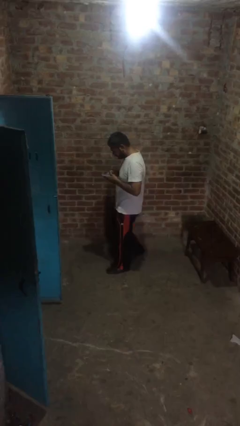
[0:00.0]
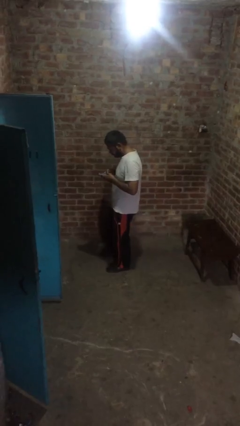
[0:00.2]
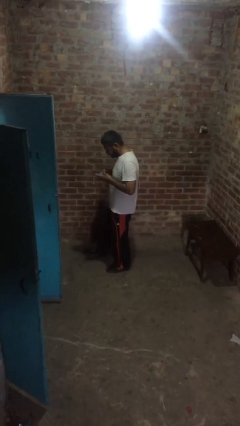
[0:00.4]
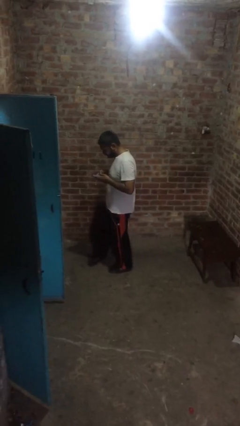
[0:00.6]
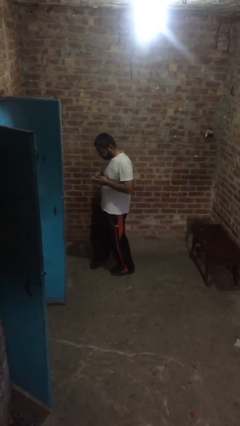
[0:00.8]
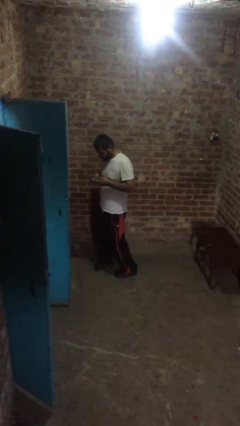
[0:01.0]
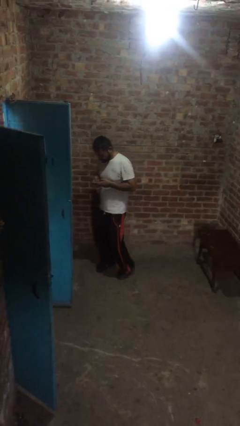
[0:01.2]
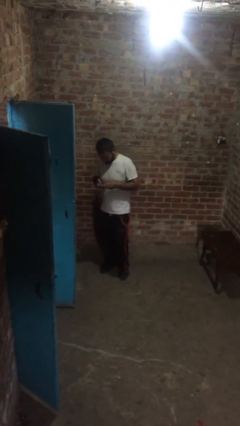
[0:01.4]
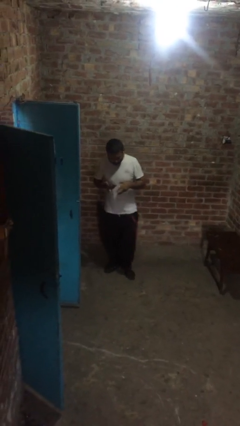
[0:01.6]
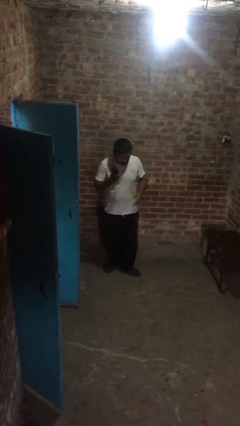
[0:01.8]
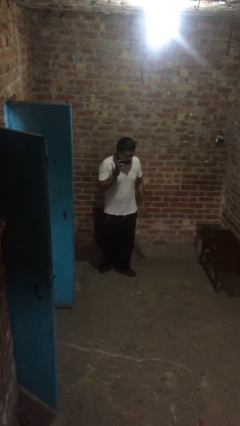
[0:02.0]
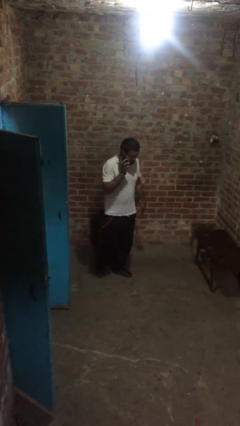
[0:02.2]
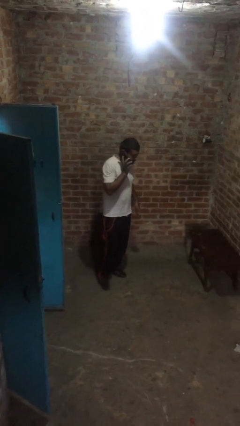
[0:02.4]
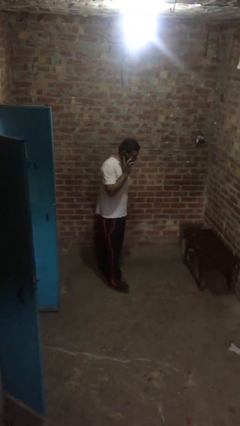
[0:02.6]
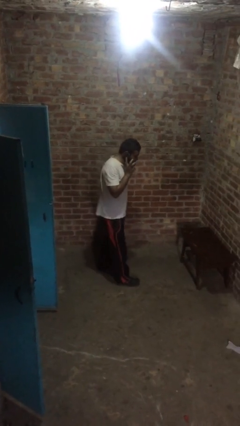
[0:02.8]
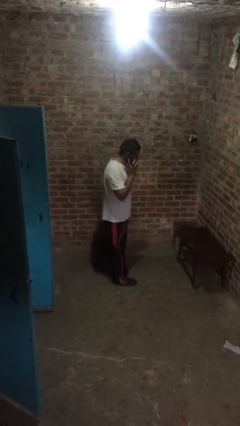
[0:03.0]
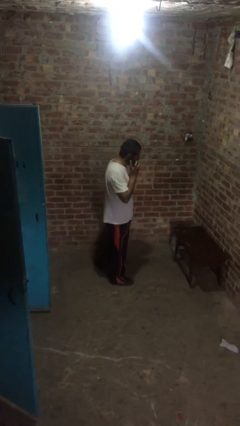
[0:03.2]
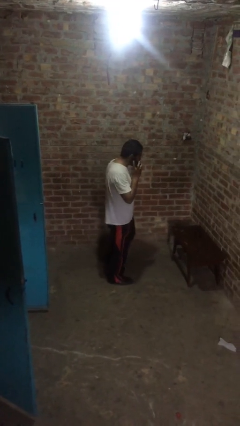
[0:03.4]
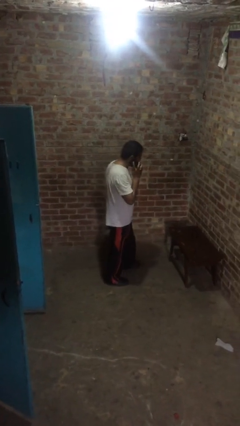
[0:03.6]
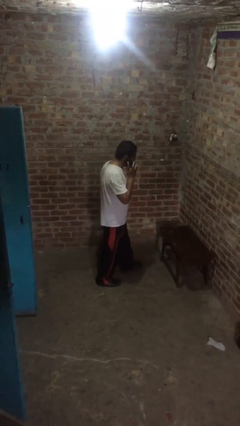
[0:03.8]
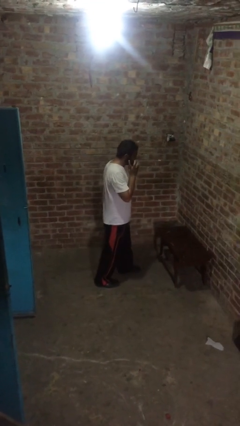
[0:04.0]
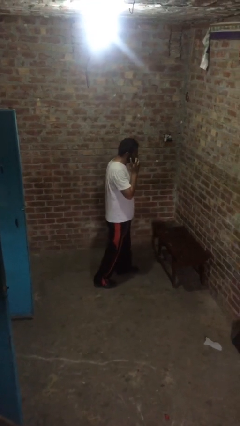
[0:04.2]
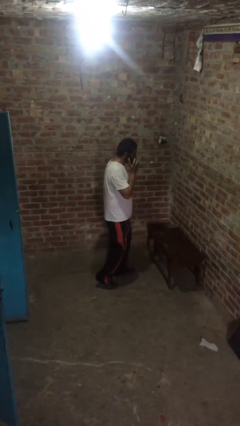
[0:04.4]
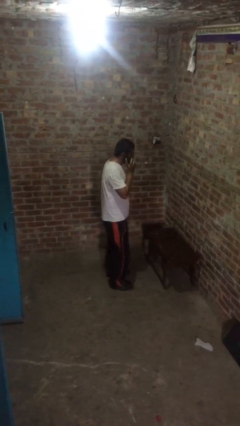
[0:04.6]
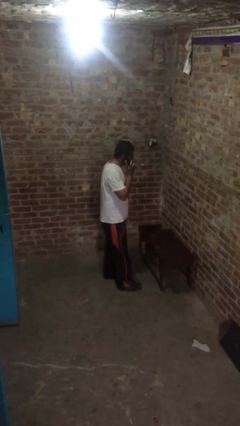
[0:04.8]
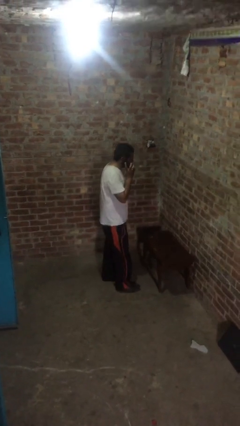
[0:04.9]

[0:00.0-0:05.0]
person talks on phone

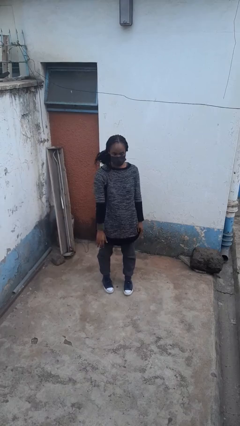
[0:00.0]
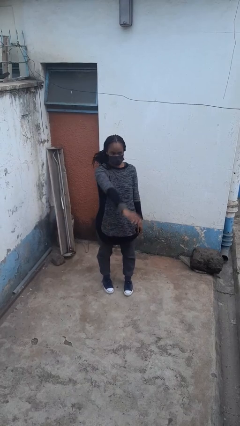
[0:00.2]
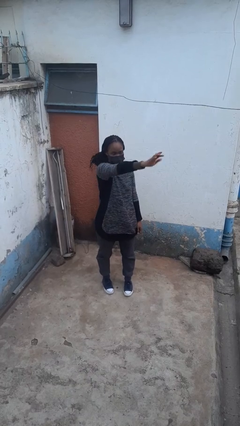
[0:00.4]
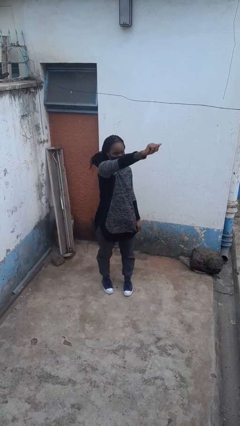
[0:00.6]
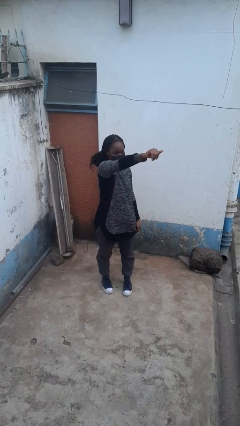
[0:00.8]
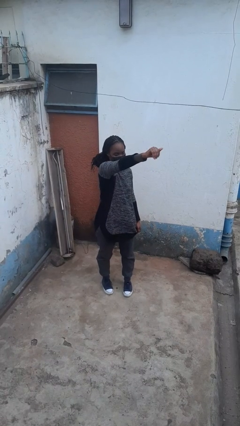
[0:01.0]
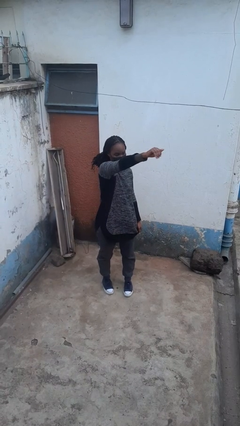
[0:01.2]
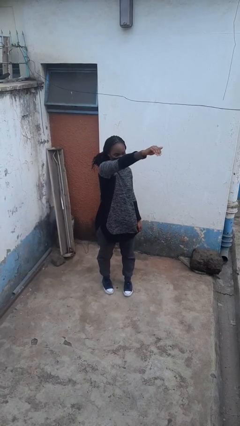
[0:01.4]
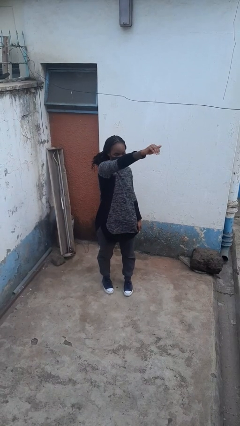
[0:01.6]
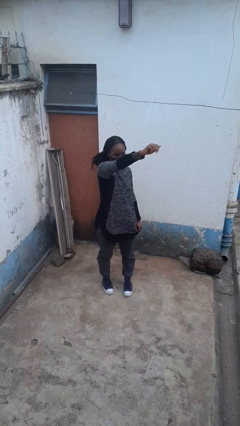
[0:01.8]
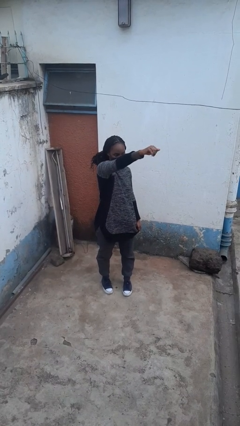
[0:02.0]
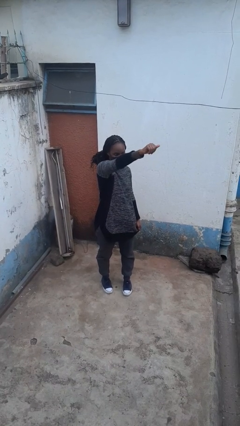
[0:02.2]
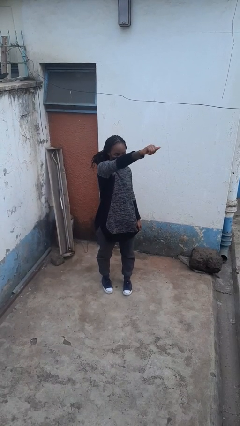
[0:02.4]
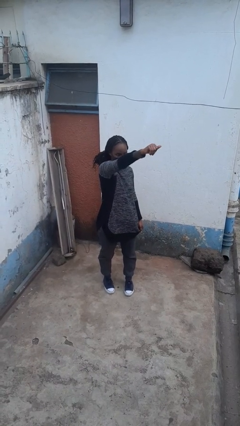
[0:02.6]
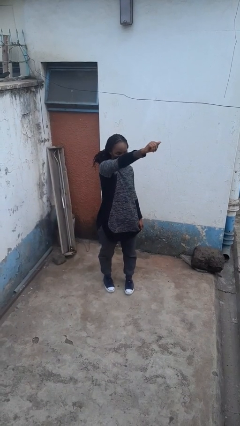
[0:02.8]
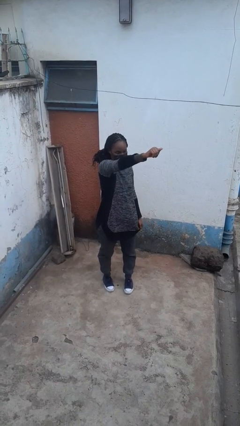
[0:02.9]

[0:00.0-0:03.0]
person gestures come here

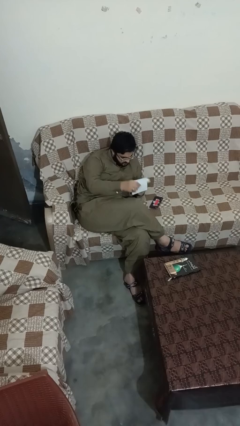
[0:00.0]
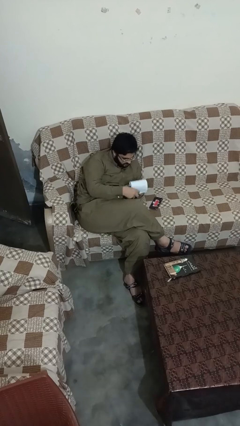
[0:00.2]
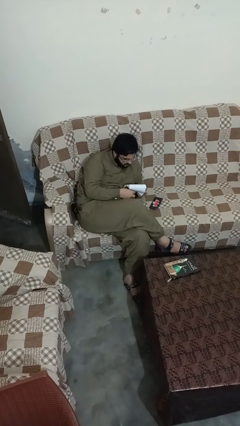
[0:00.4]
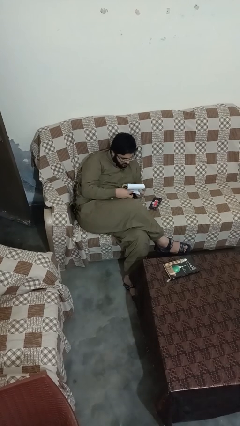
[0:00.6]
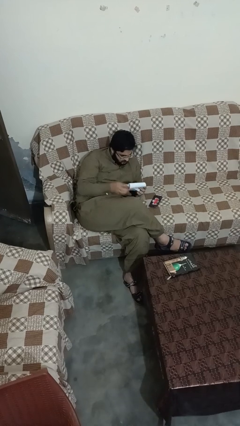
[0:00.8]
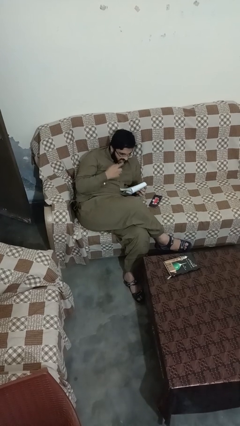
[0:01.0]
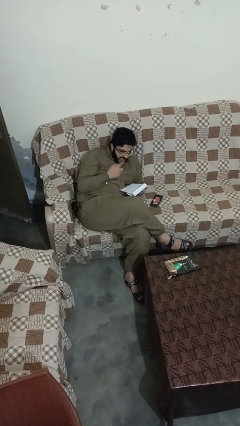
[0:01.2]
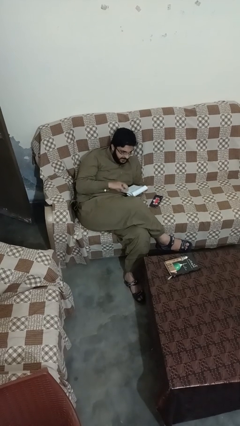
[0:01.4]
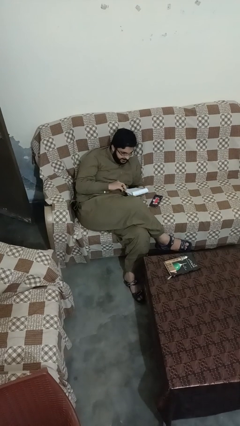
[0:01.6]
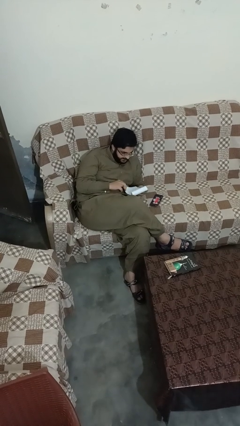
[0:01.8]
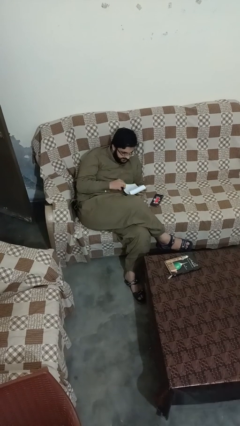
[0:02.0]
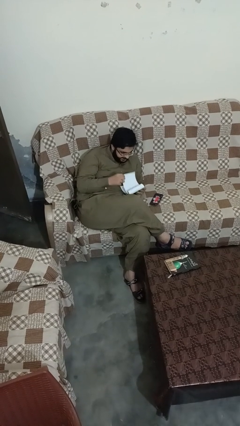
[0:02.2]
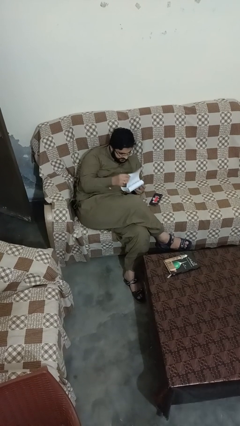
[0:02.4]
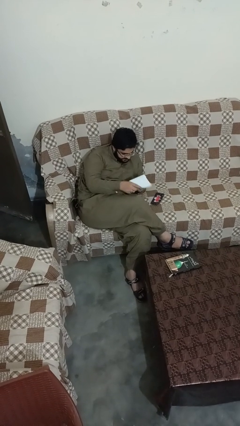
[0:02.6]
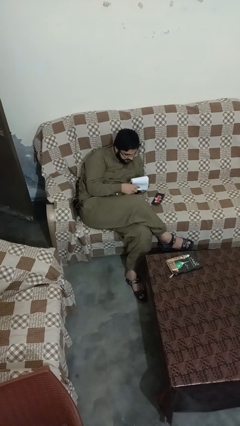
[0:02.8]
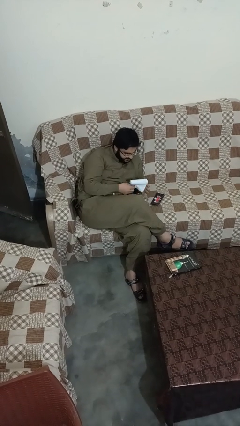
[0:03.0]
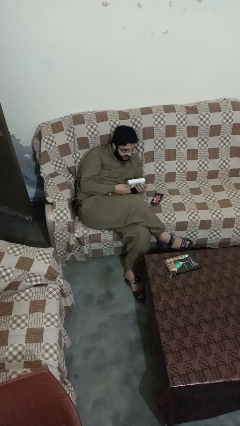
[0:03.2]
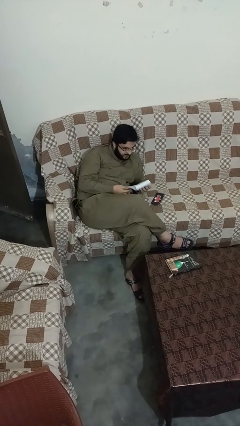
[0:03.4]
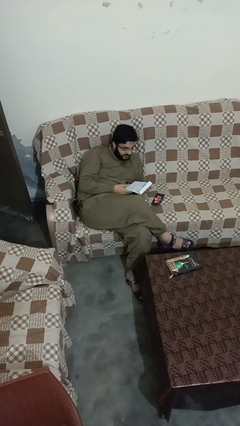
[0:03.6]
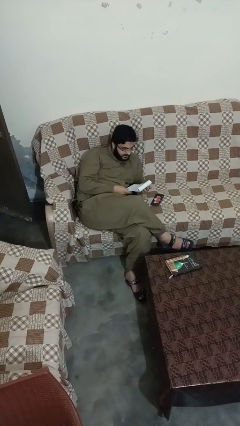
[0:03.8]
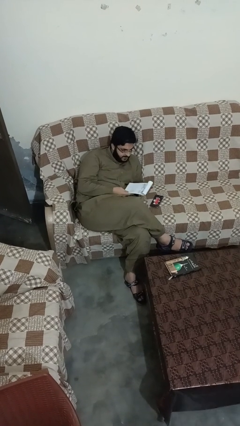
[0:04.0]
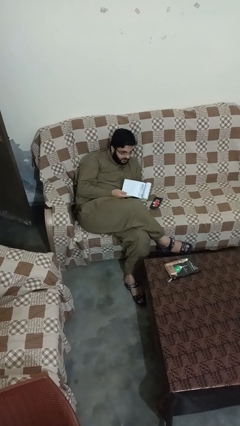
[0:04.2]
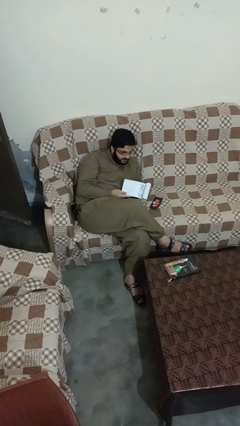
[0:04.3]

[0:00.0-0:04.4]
person reads magazine

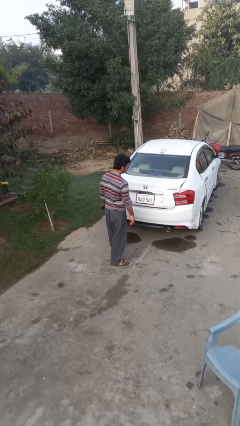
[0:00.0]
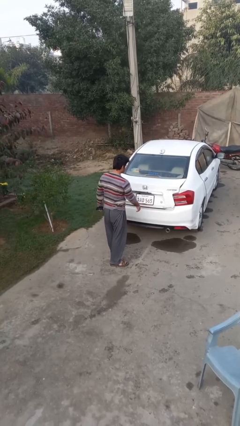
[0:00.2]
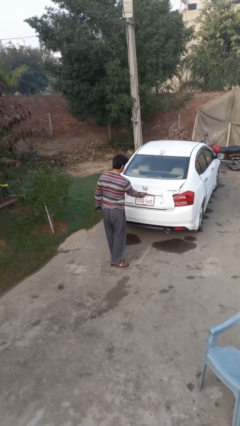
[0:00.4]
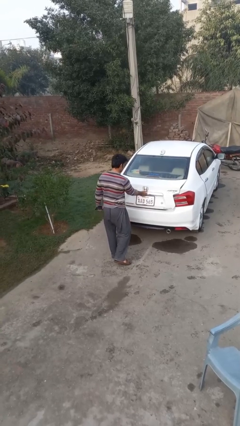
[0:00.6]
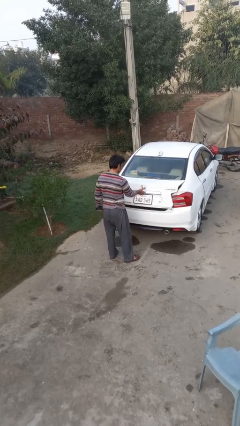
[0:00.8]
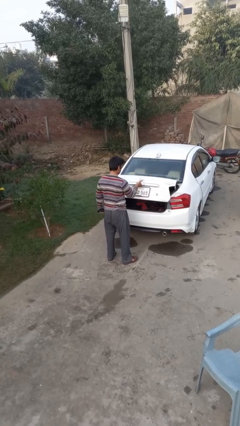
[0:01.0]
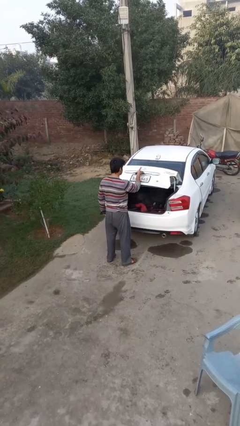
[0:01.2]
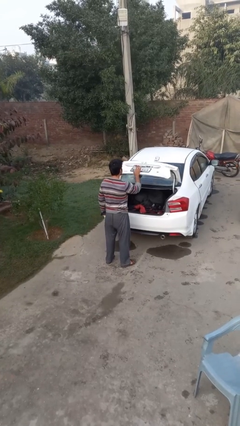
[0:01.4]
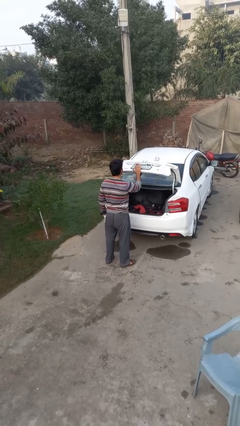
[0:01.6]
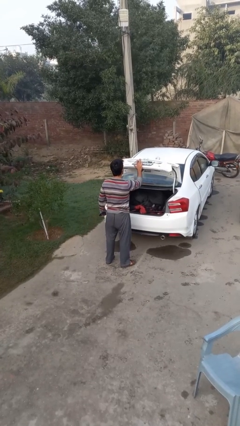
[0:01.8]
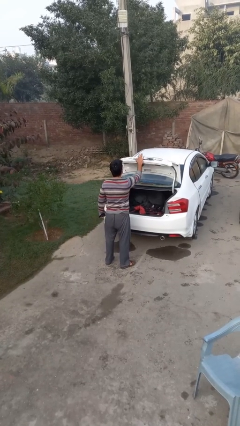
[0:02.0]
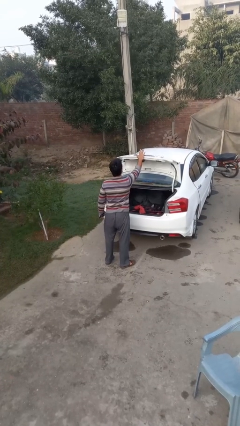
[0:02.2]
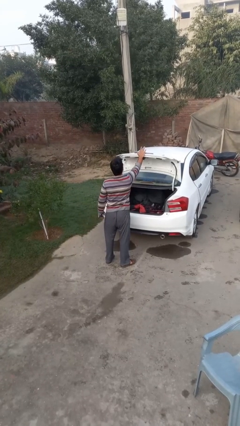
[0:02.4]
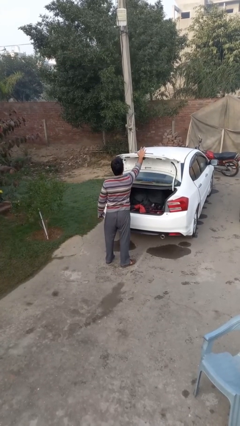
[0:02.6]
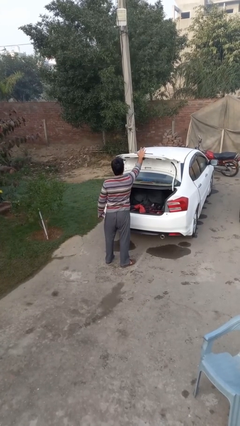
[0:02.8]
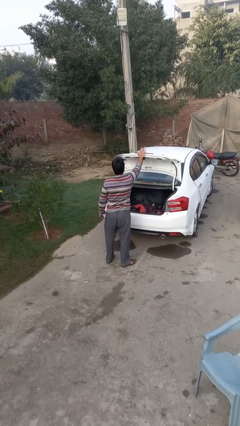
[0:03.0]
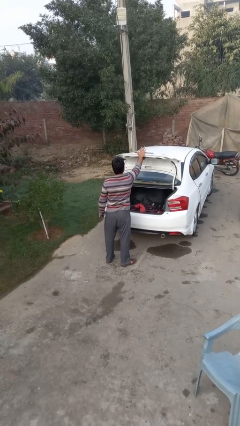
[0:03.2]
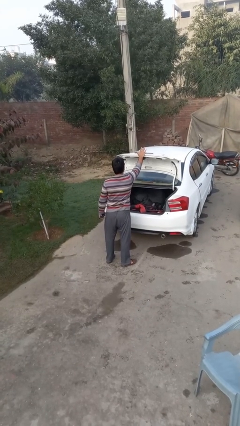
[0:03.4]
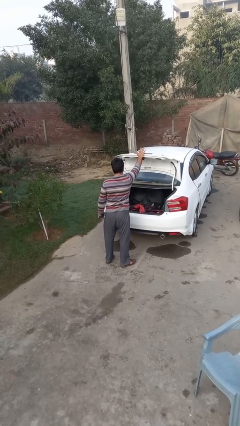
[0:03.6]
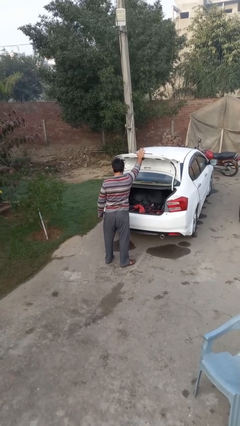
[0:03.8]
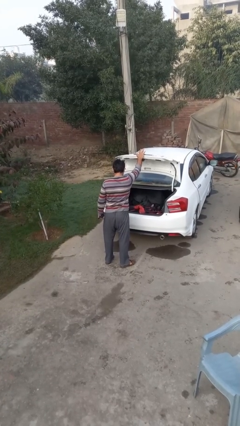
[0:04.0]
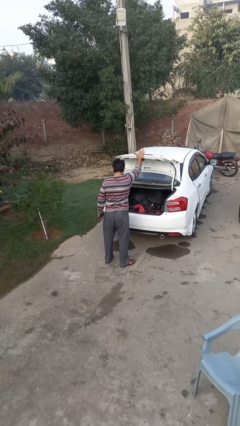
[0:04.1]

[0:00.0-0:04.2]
person opens car trunk

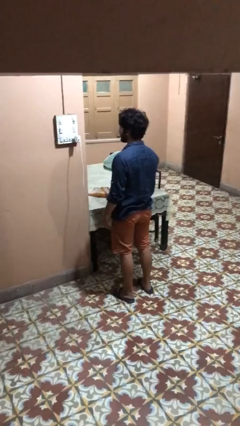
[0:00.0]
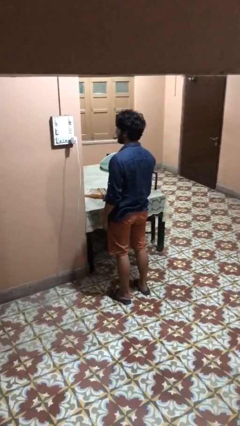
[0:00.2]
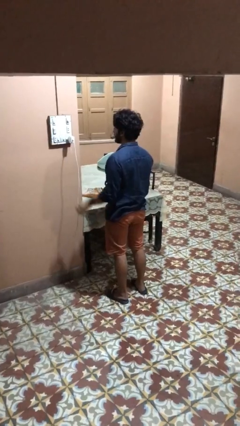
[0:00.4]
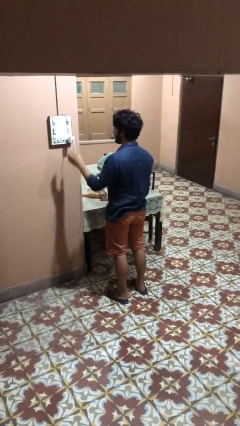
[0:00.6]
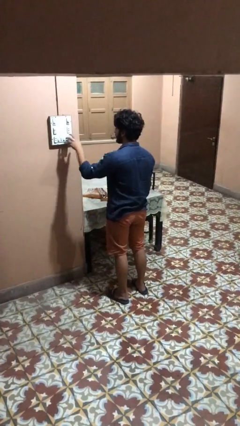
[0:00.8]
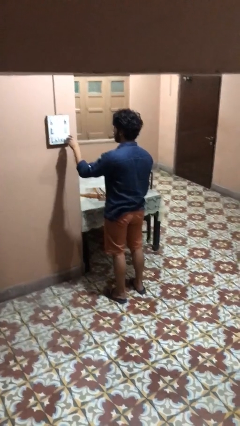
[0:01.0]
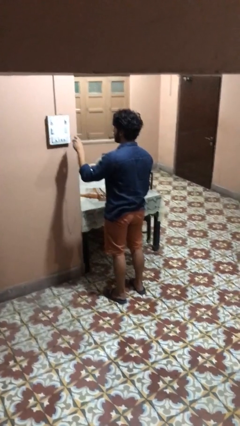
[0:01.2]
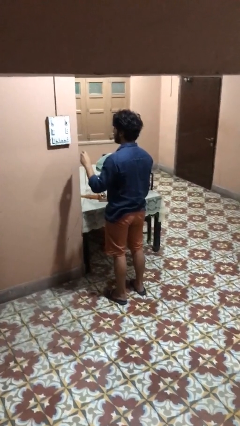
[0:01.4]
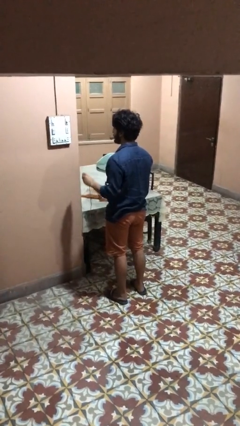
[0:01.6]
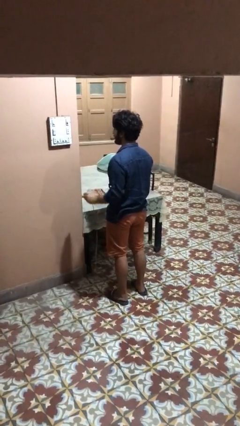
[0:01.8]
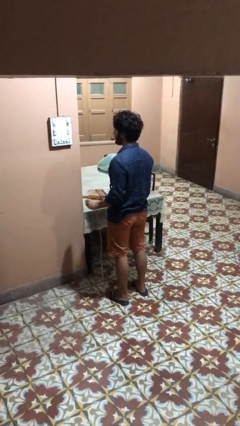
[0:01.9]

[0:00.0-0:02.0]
person unplugs from electrical socket
